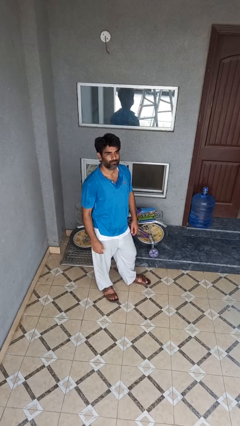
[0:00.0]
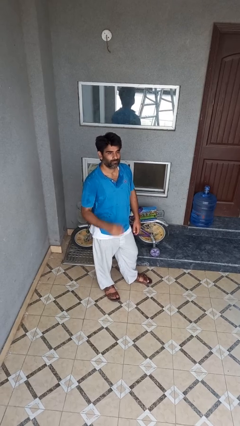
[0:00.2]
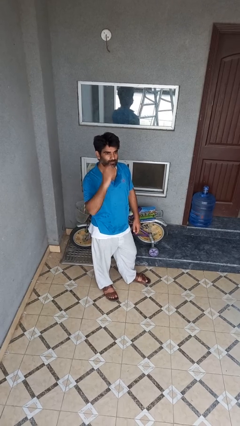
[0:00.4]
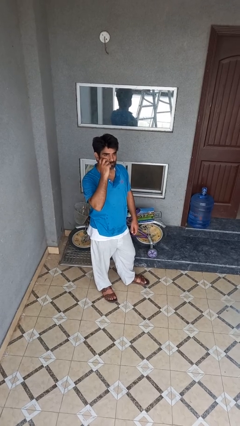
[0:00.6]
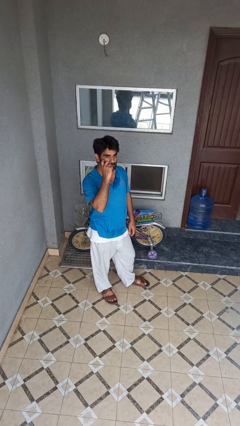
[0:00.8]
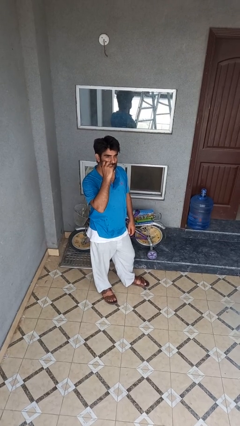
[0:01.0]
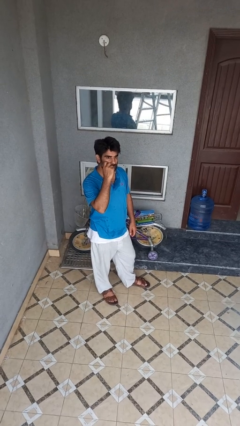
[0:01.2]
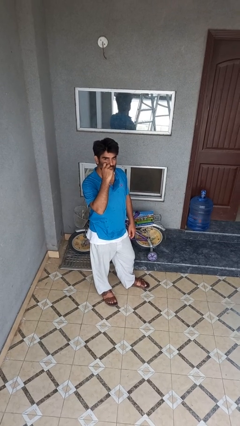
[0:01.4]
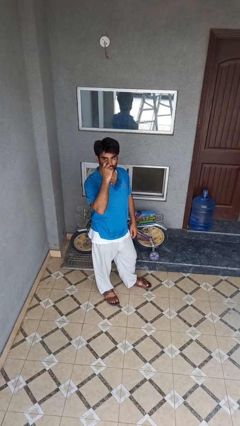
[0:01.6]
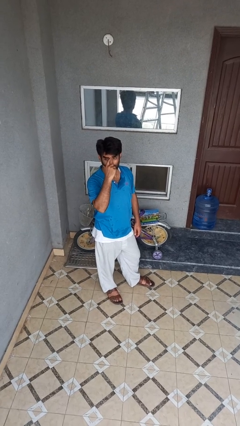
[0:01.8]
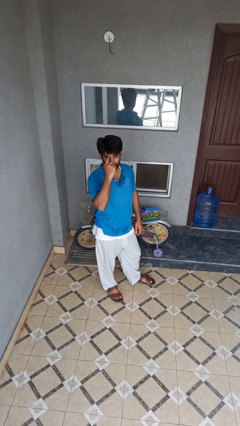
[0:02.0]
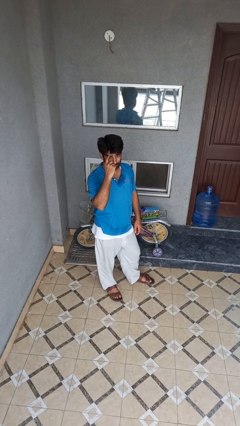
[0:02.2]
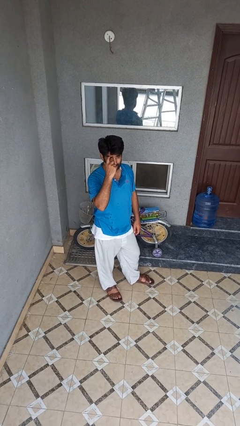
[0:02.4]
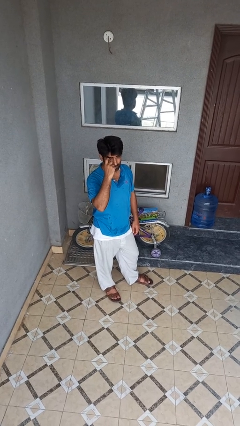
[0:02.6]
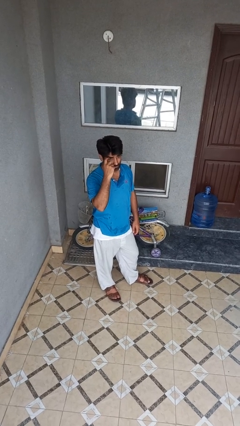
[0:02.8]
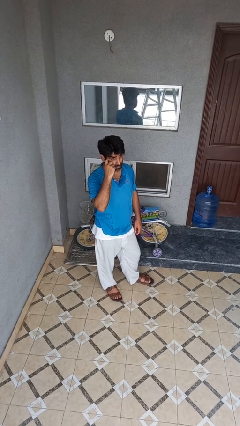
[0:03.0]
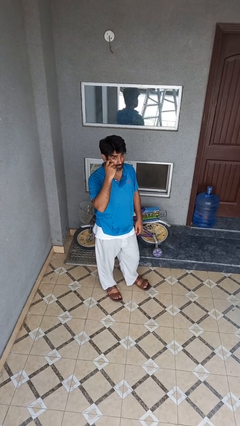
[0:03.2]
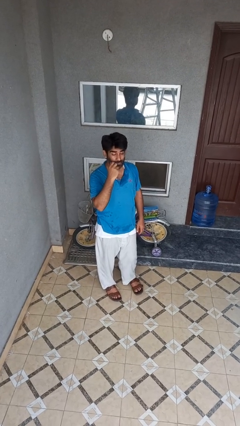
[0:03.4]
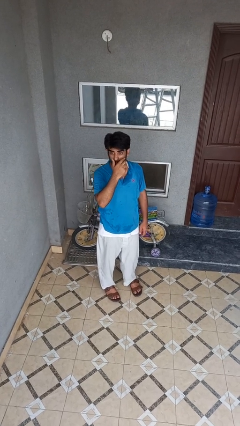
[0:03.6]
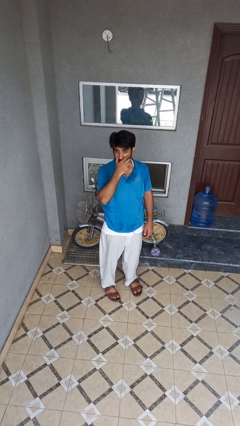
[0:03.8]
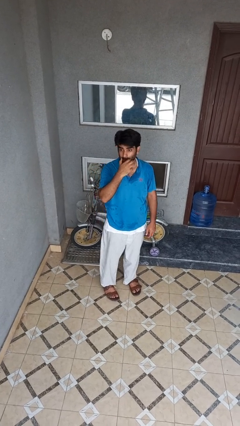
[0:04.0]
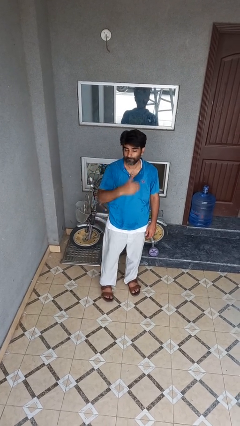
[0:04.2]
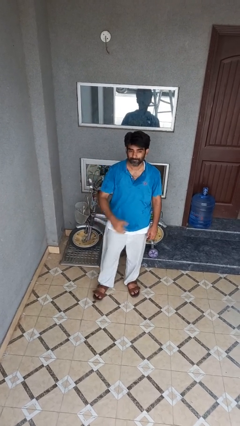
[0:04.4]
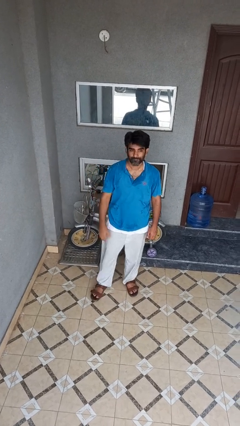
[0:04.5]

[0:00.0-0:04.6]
person scratches face

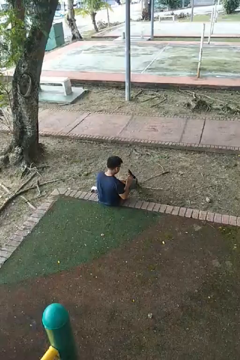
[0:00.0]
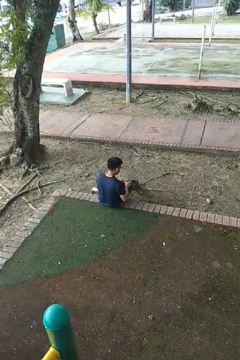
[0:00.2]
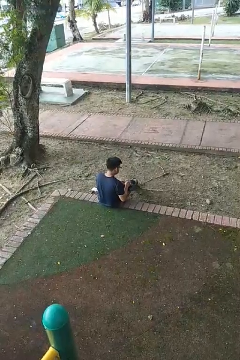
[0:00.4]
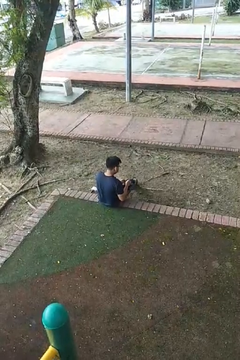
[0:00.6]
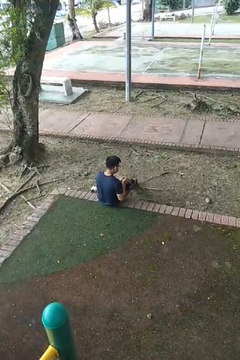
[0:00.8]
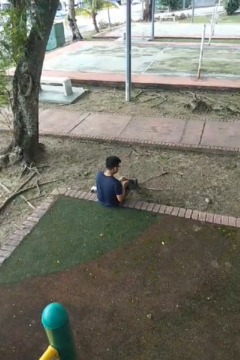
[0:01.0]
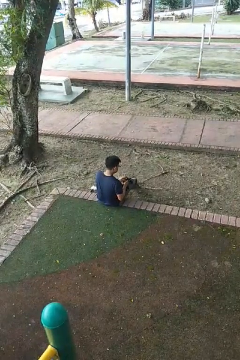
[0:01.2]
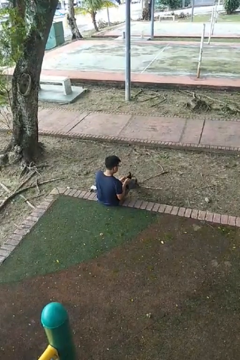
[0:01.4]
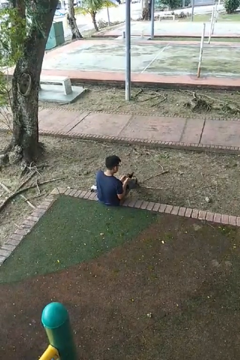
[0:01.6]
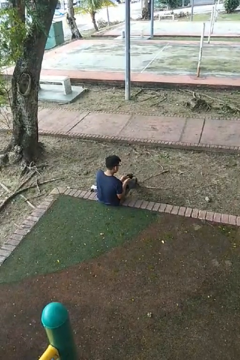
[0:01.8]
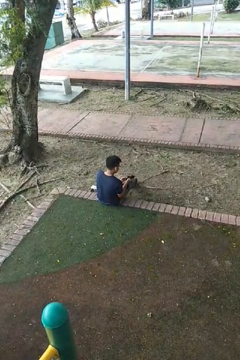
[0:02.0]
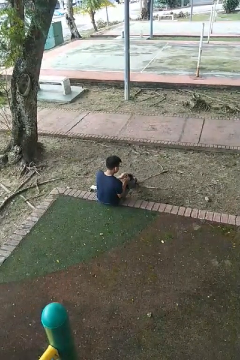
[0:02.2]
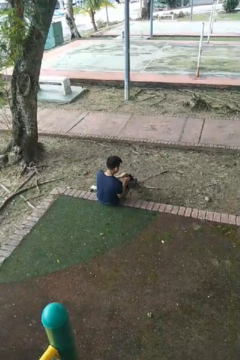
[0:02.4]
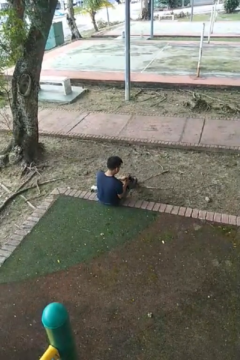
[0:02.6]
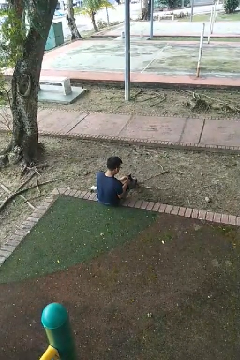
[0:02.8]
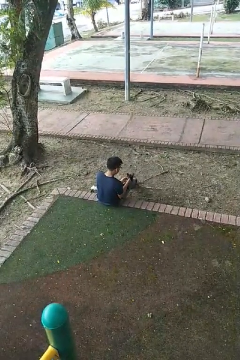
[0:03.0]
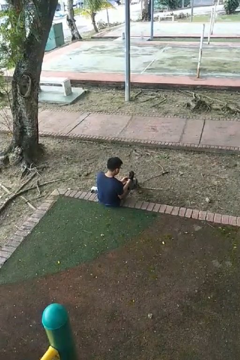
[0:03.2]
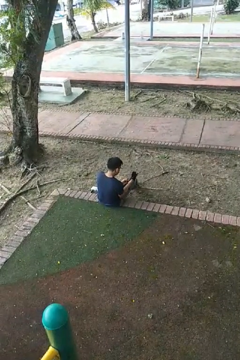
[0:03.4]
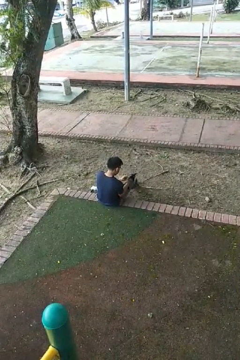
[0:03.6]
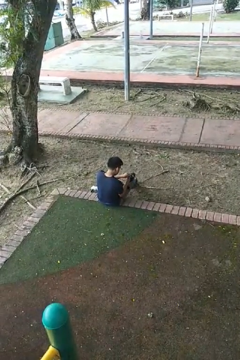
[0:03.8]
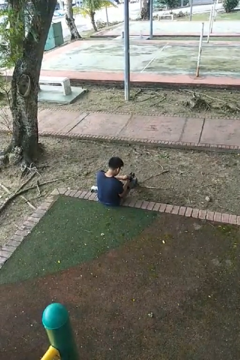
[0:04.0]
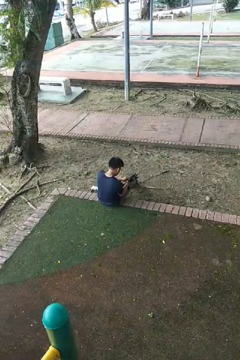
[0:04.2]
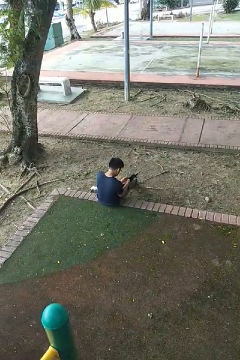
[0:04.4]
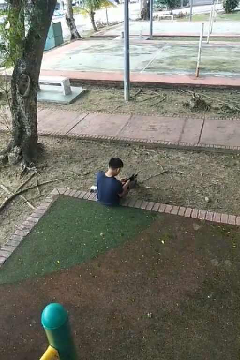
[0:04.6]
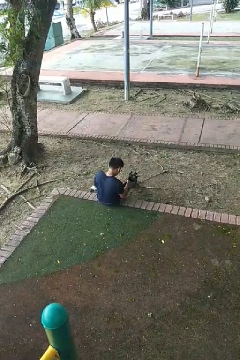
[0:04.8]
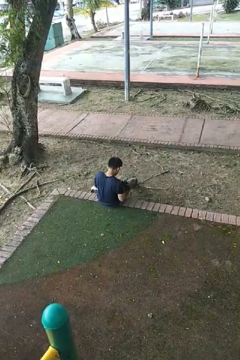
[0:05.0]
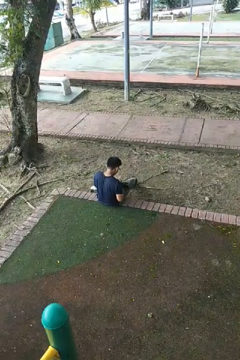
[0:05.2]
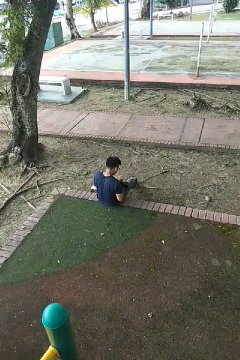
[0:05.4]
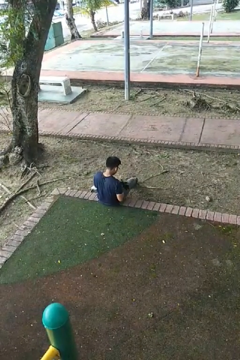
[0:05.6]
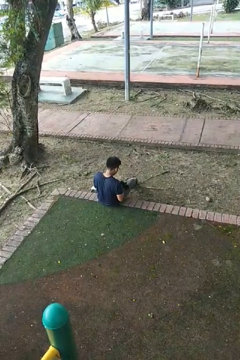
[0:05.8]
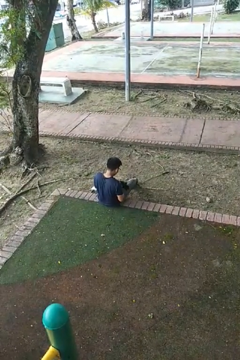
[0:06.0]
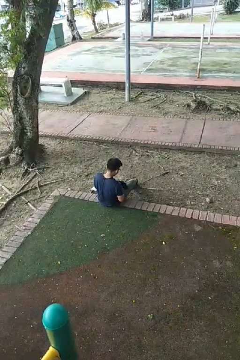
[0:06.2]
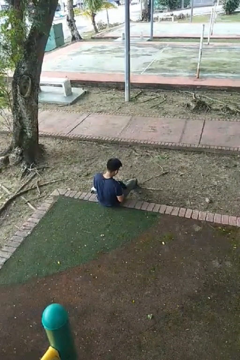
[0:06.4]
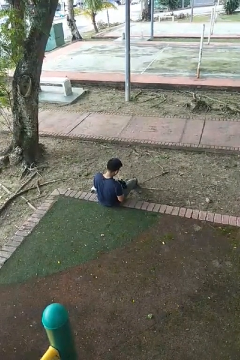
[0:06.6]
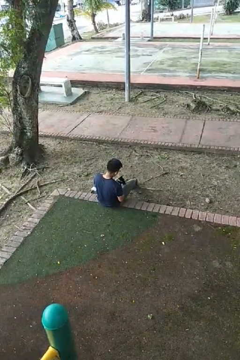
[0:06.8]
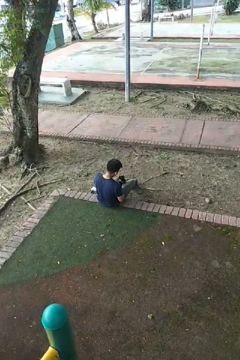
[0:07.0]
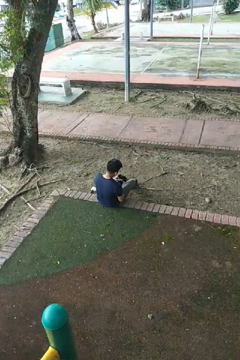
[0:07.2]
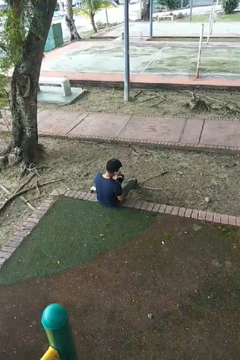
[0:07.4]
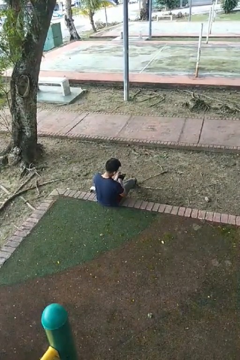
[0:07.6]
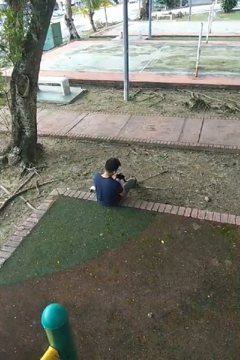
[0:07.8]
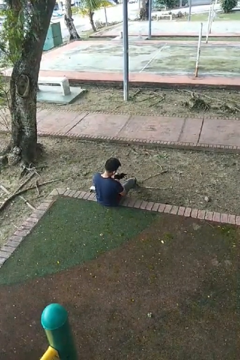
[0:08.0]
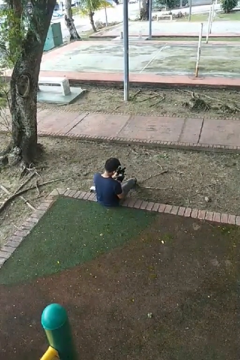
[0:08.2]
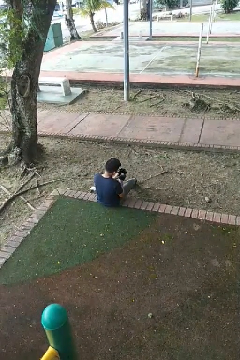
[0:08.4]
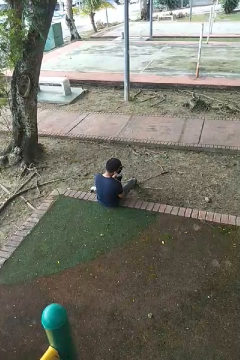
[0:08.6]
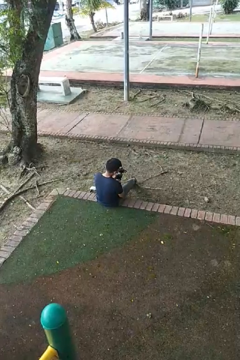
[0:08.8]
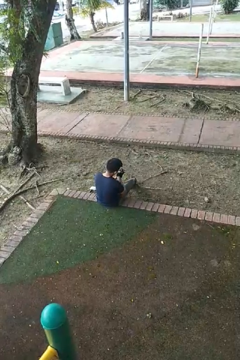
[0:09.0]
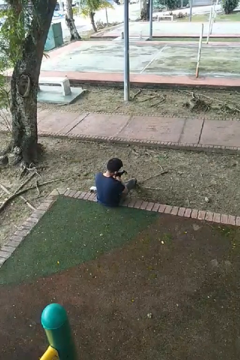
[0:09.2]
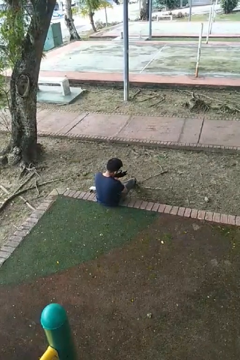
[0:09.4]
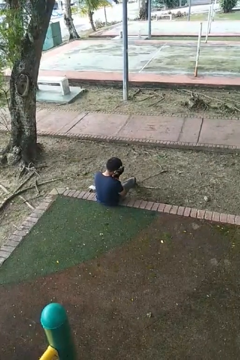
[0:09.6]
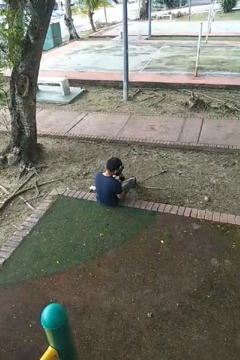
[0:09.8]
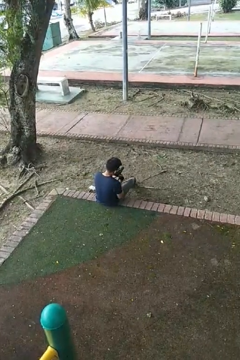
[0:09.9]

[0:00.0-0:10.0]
person puts on gloves

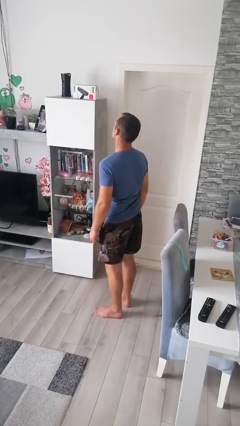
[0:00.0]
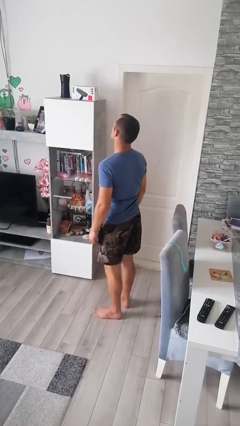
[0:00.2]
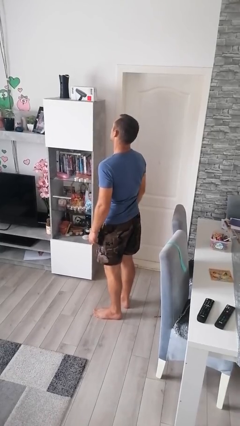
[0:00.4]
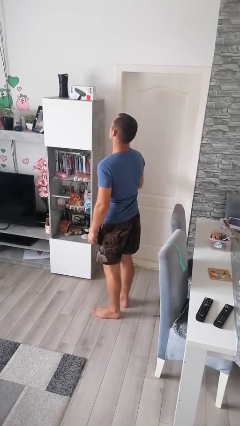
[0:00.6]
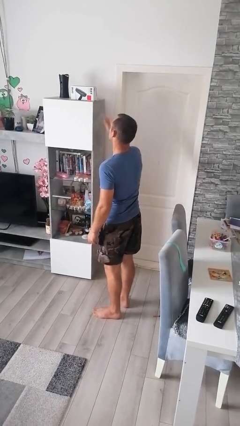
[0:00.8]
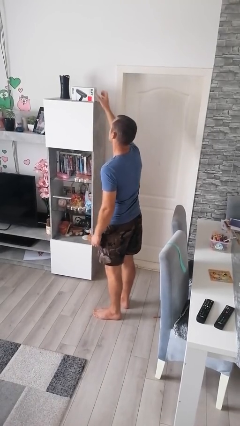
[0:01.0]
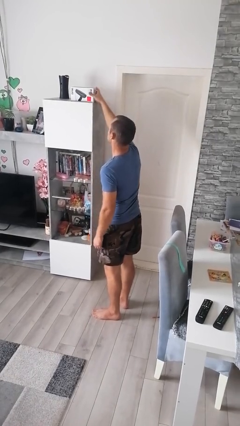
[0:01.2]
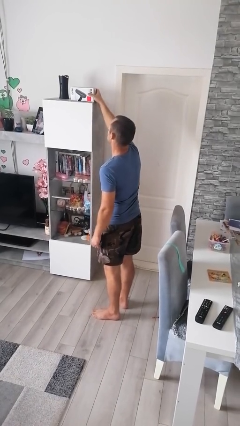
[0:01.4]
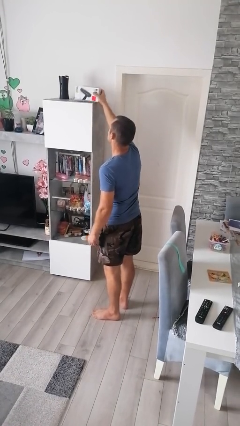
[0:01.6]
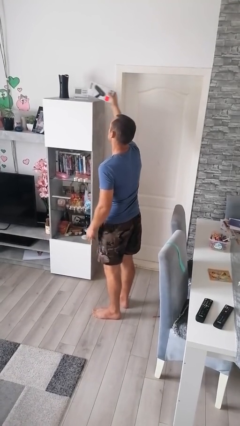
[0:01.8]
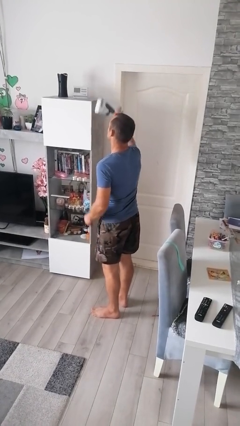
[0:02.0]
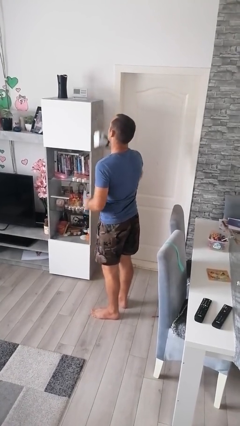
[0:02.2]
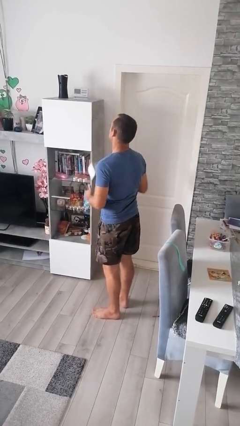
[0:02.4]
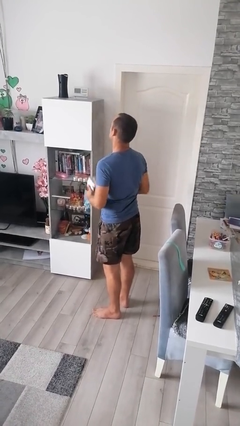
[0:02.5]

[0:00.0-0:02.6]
person puts down object on shelf

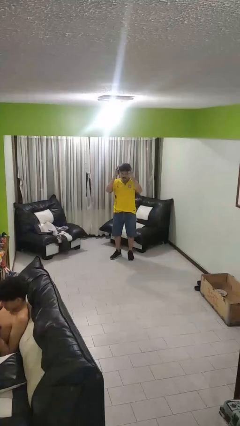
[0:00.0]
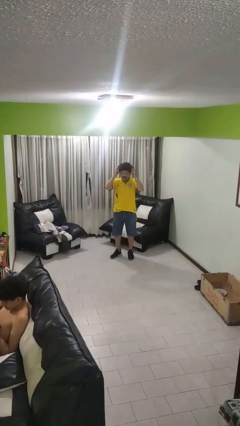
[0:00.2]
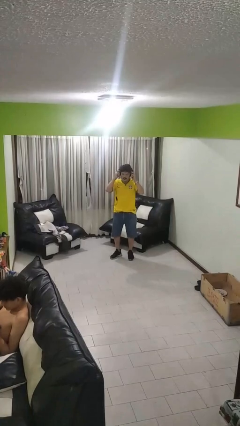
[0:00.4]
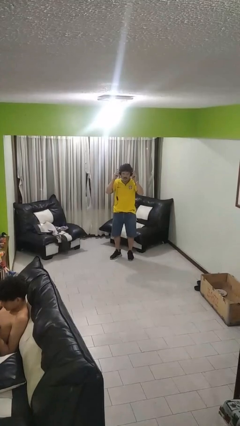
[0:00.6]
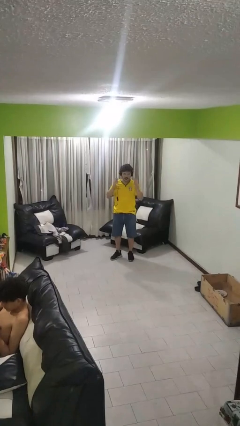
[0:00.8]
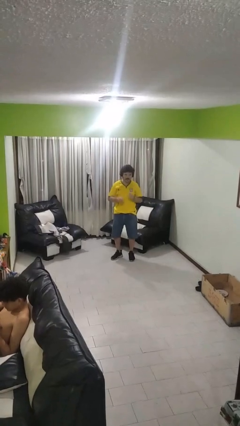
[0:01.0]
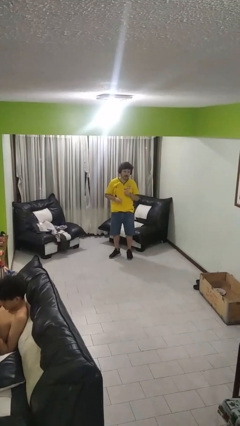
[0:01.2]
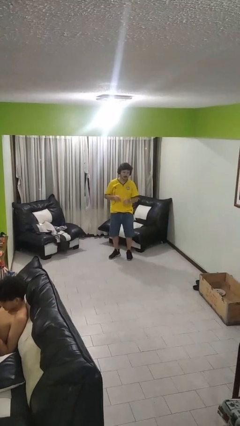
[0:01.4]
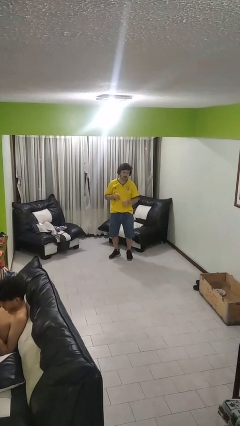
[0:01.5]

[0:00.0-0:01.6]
person puts on headphones

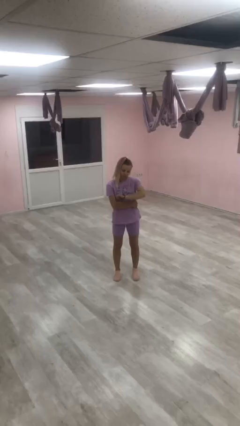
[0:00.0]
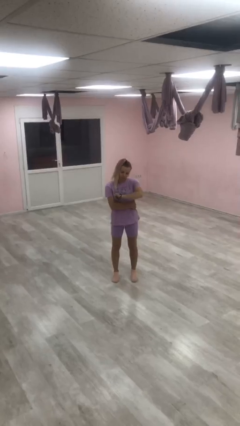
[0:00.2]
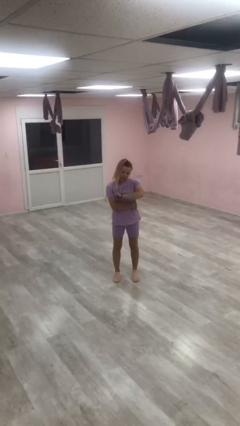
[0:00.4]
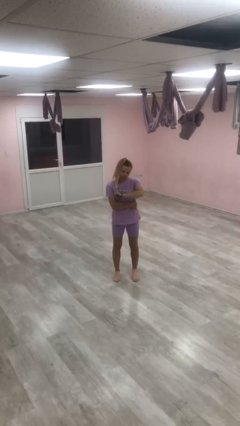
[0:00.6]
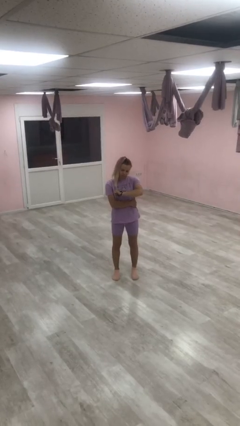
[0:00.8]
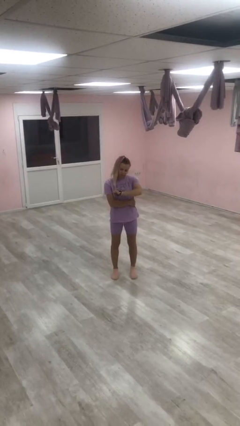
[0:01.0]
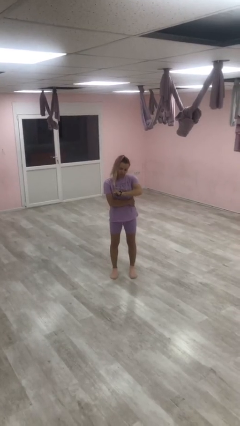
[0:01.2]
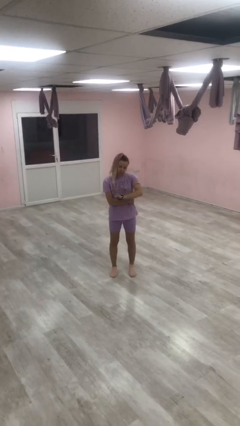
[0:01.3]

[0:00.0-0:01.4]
person looks at wristwatch
